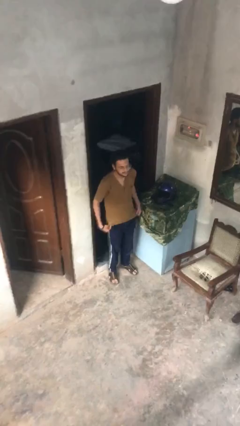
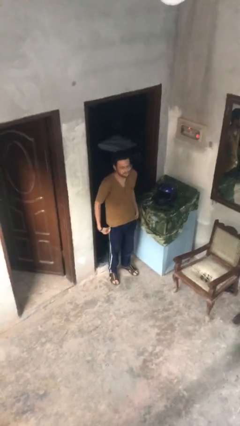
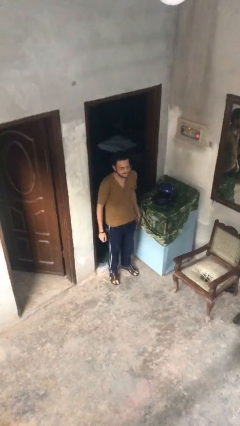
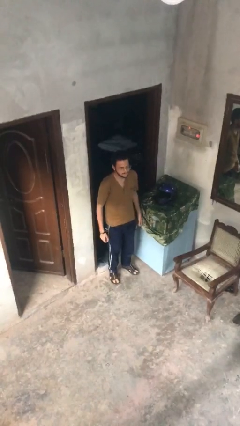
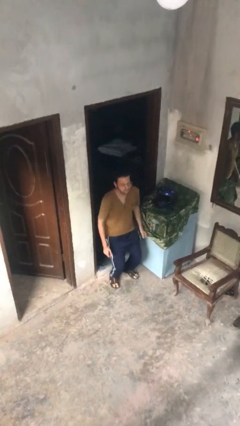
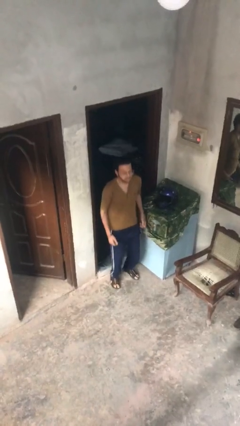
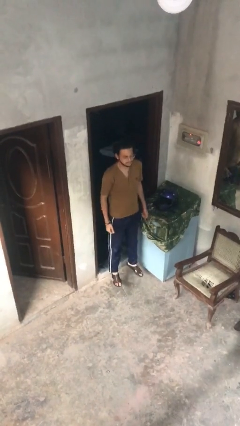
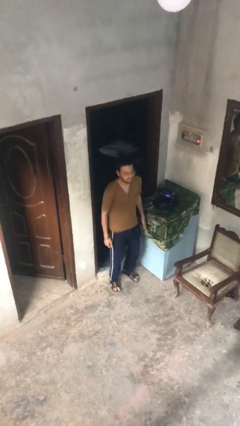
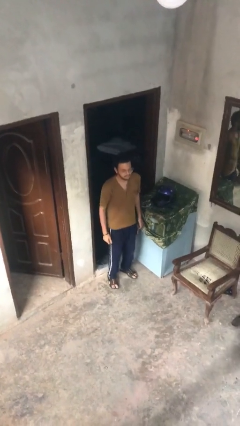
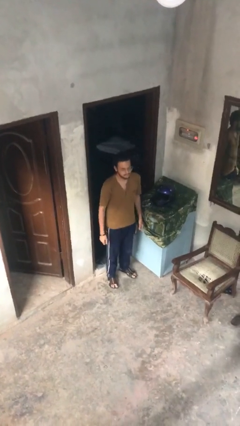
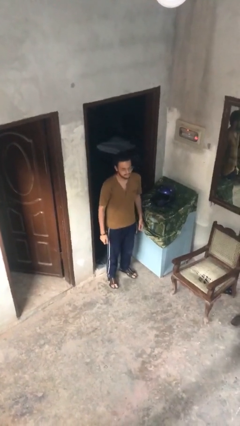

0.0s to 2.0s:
person jumps

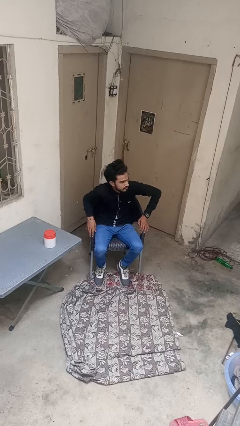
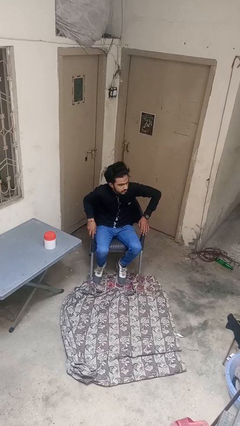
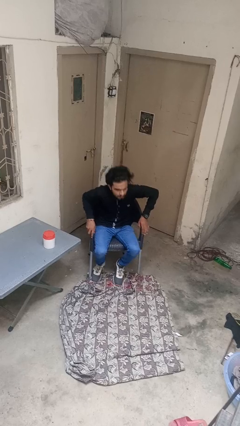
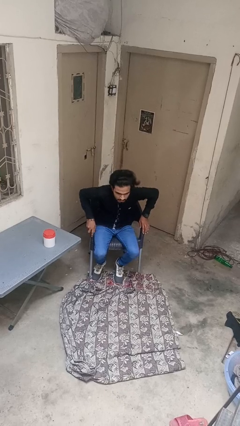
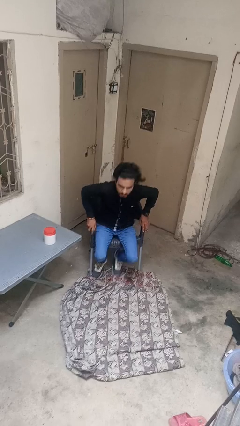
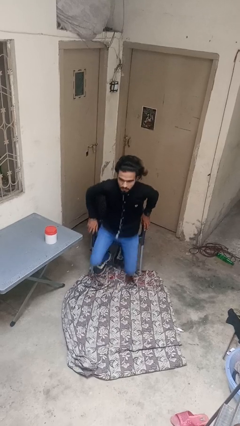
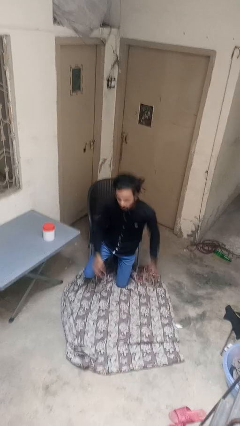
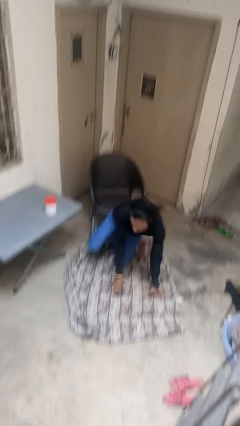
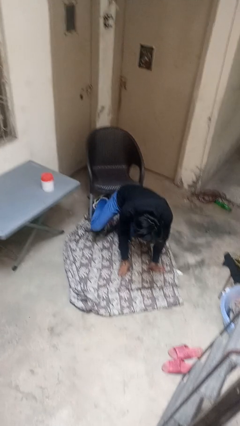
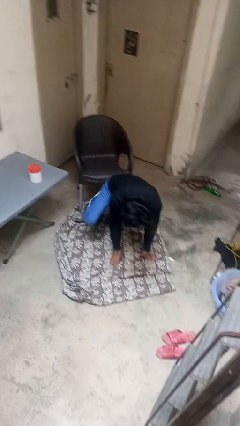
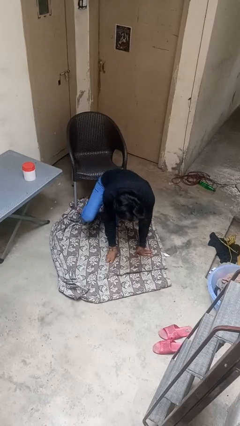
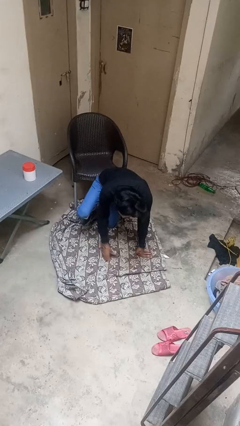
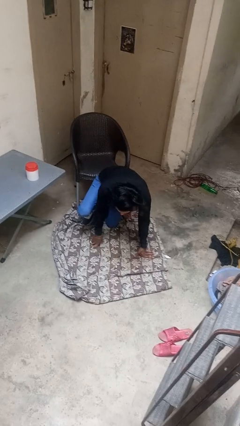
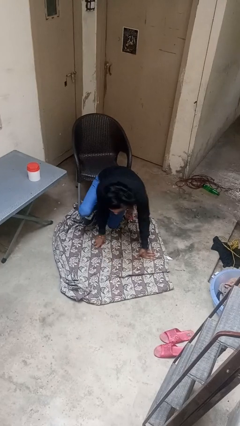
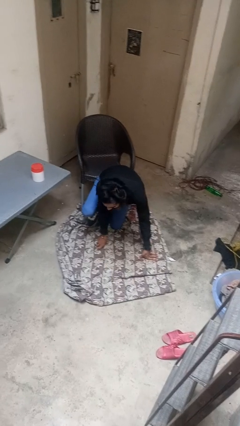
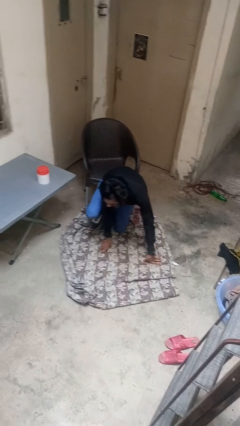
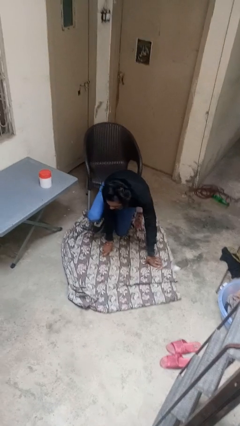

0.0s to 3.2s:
person falls from chair

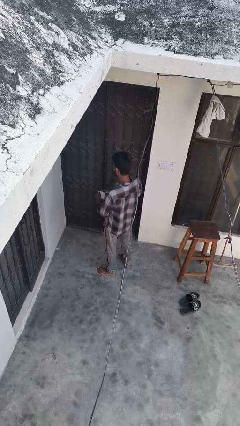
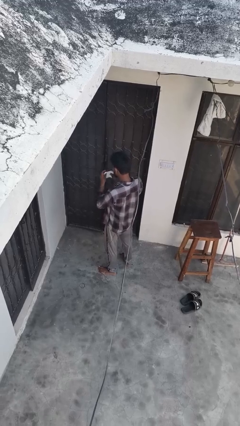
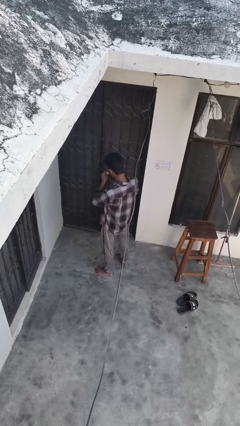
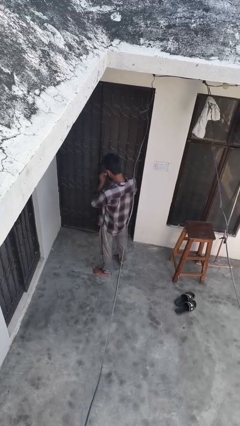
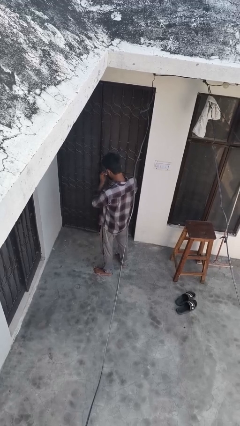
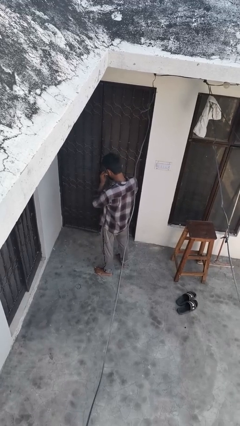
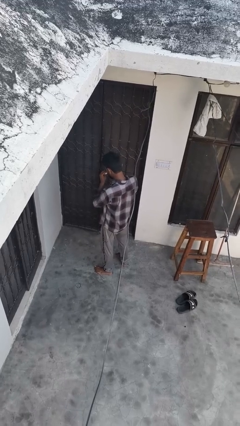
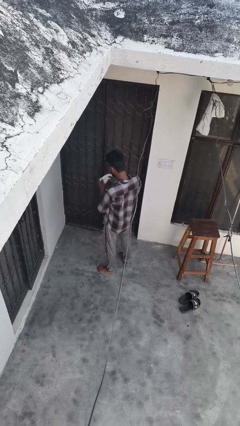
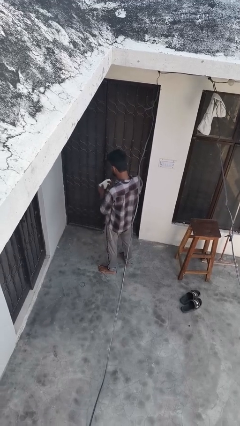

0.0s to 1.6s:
person wipes mouth with napkin

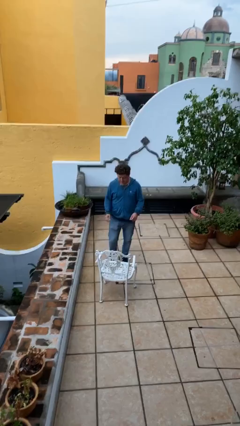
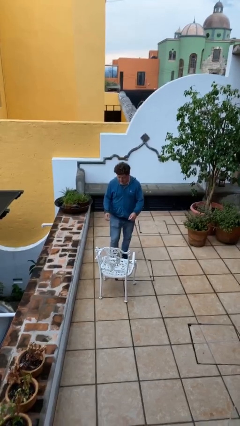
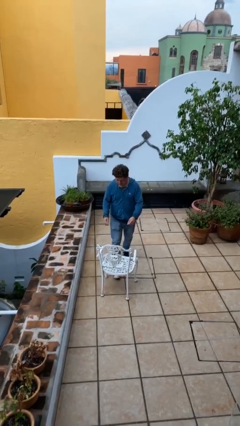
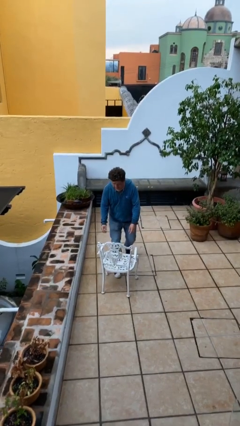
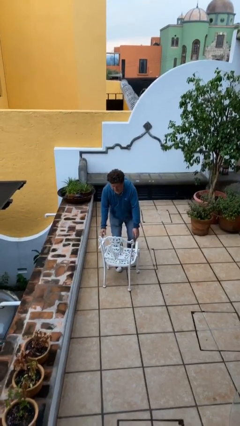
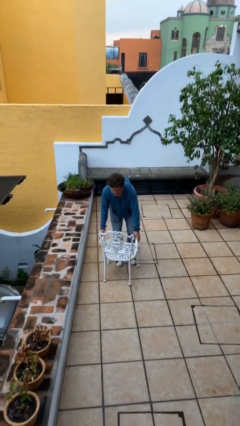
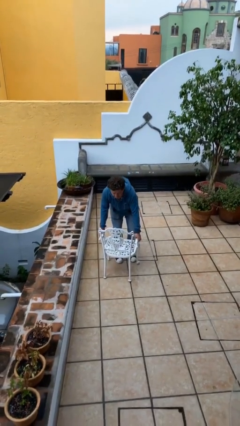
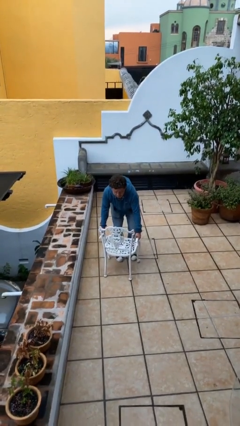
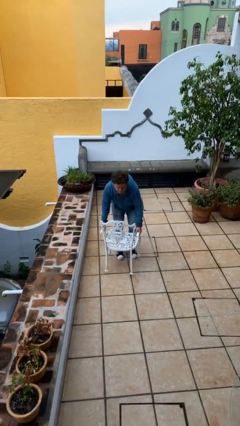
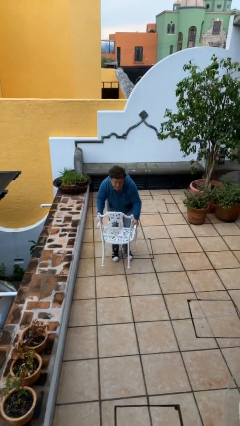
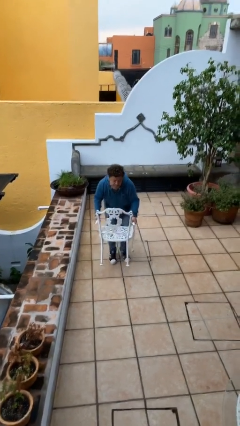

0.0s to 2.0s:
person picks up object from floor

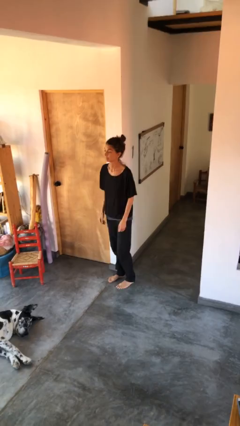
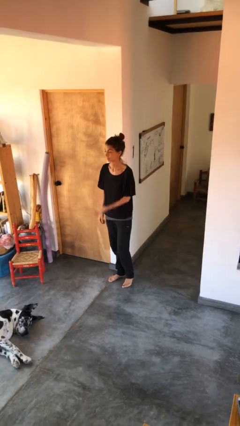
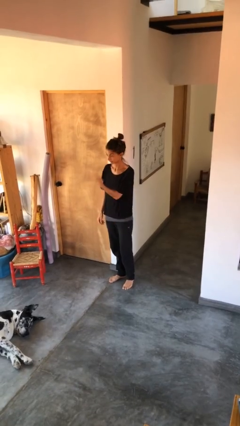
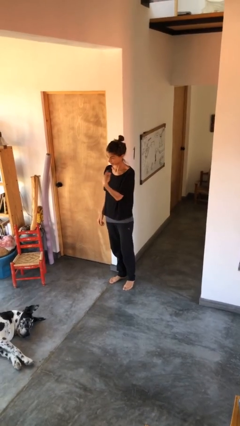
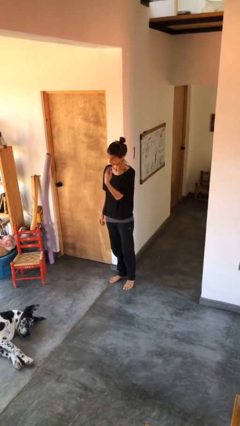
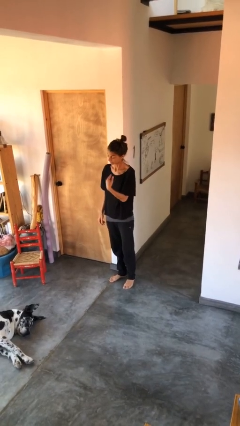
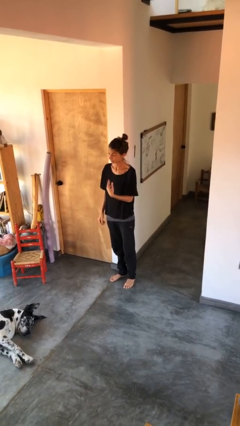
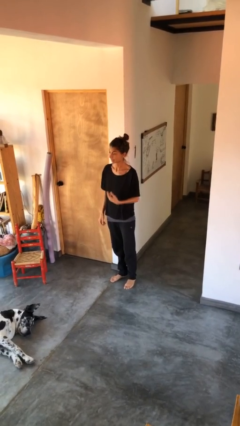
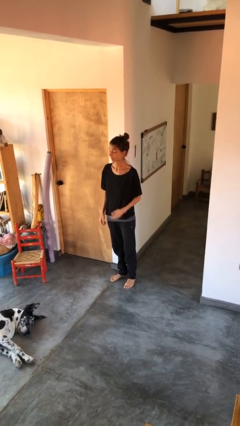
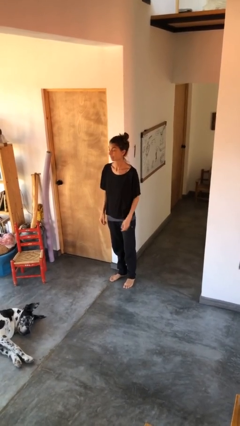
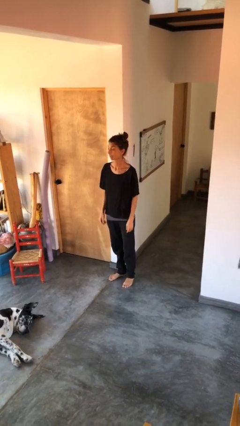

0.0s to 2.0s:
person gestures come here

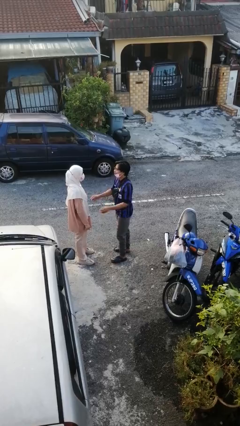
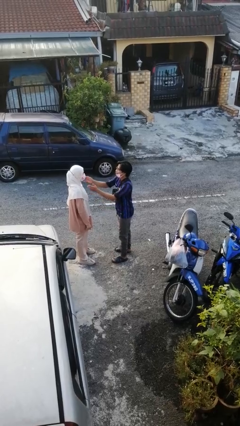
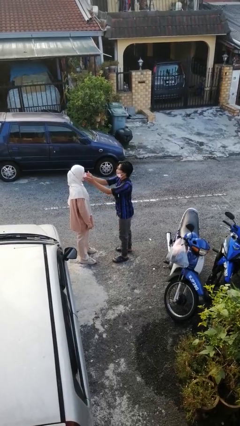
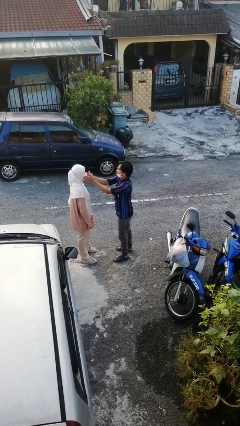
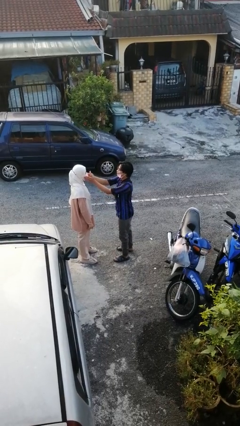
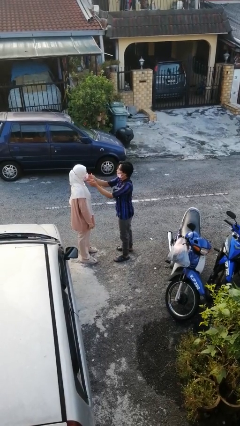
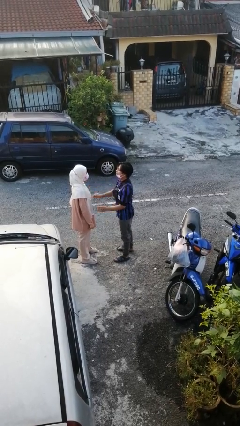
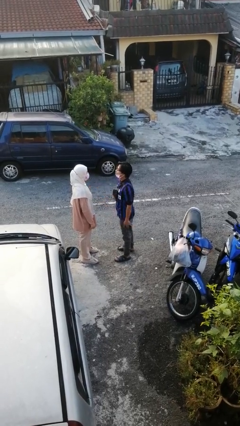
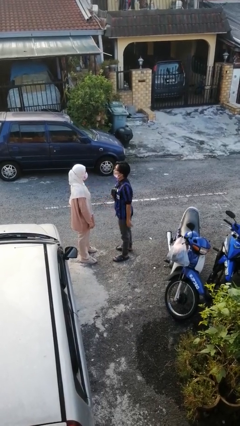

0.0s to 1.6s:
person touches face of person

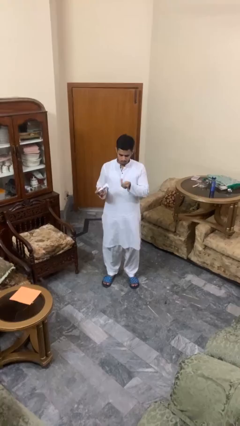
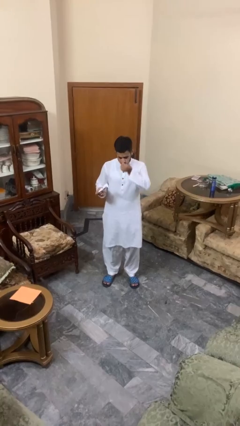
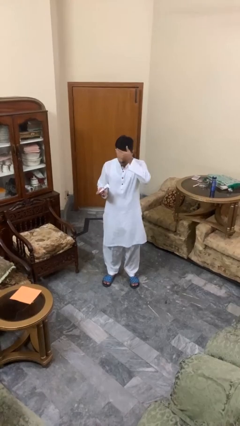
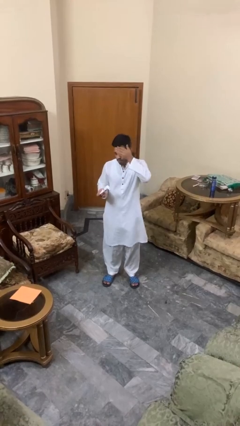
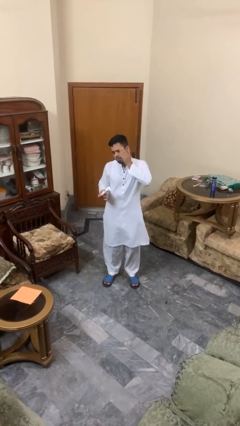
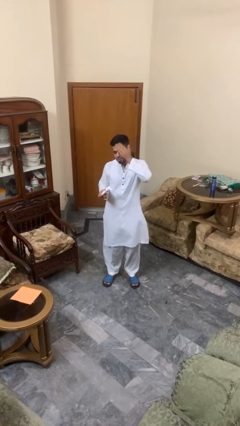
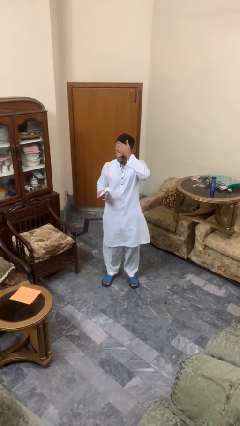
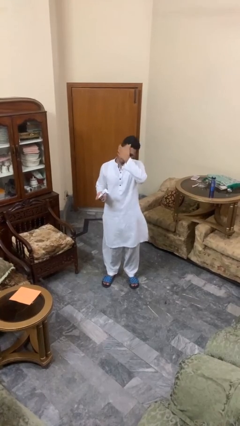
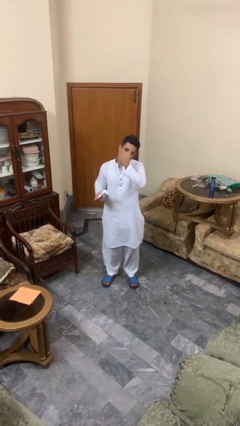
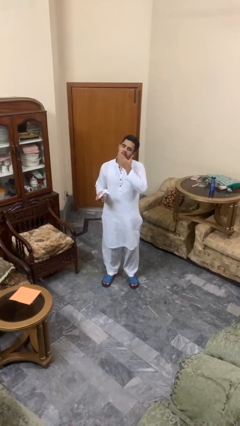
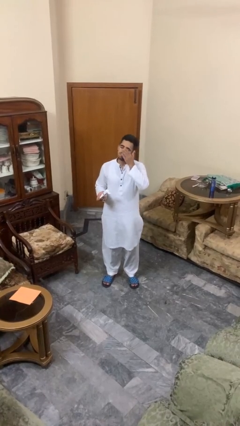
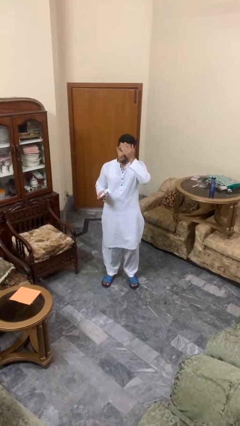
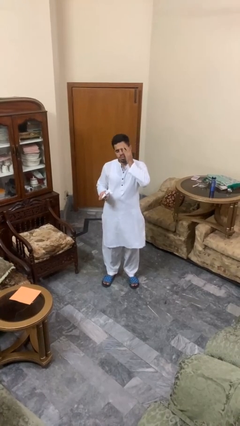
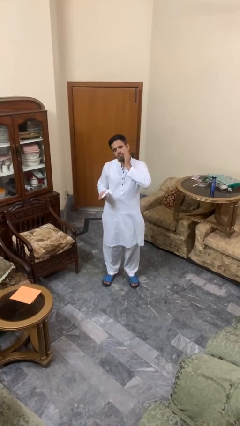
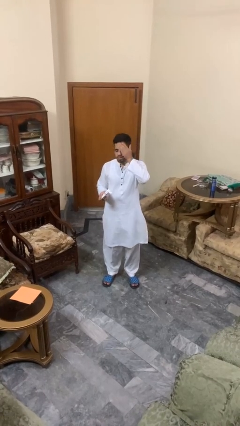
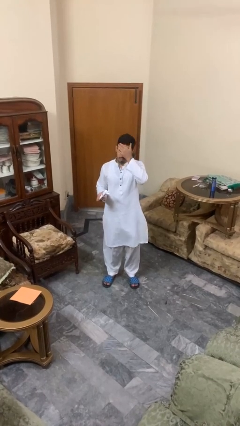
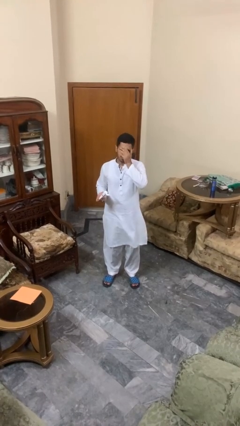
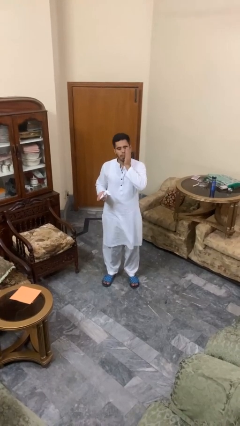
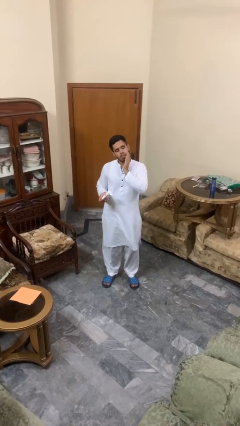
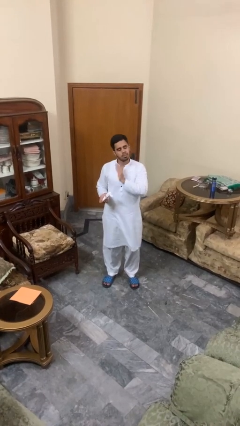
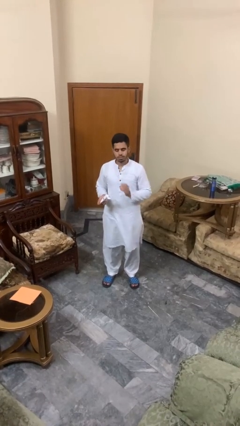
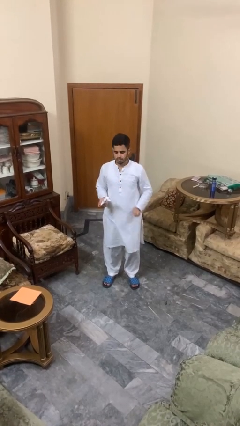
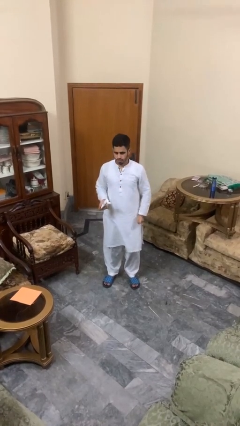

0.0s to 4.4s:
person applies facial moisturizer
